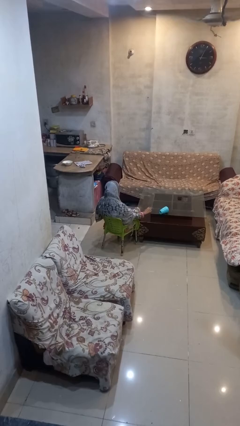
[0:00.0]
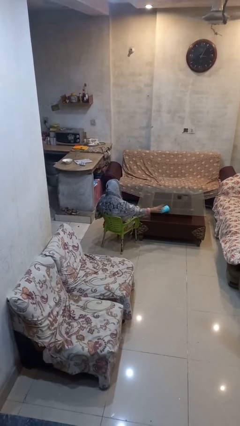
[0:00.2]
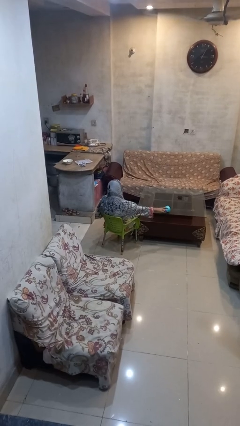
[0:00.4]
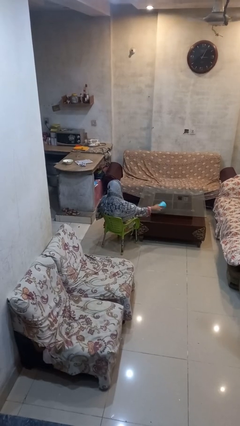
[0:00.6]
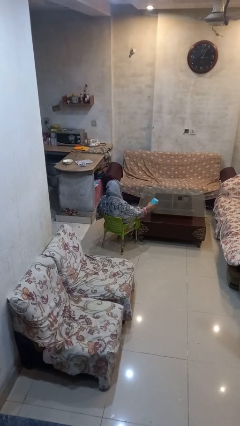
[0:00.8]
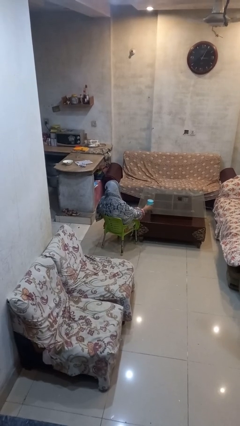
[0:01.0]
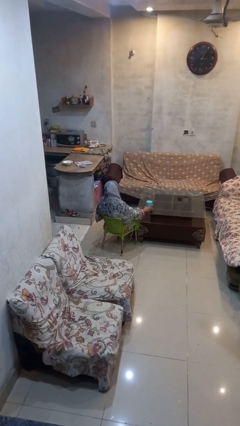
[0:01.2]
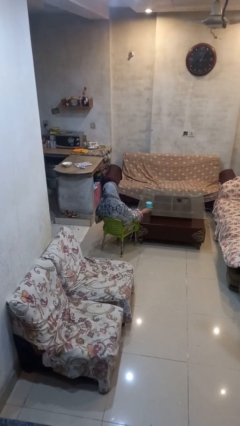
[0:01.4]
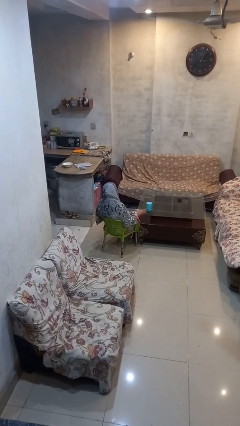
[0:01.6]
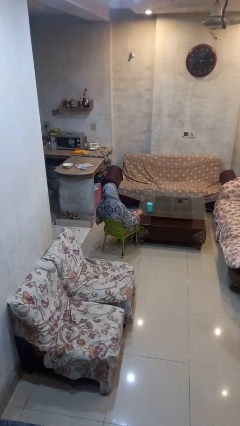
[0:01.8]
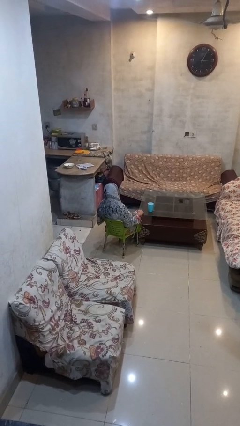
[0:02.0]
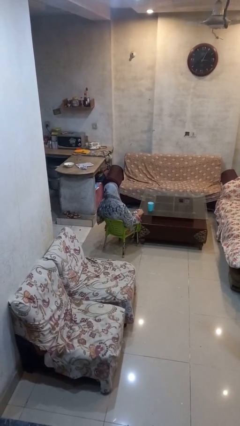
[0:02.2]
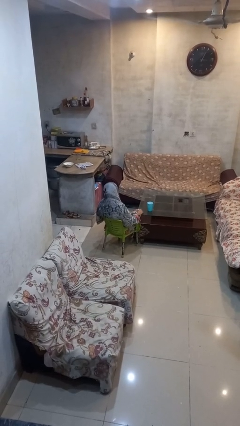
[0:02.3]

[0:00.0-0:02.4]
person sets upright glass

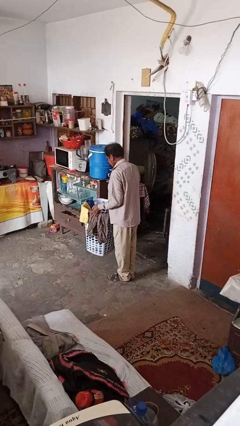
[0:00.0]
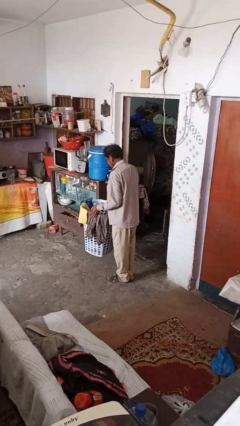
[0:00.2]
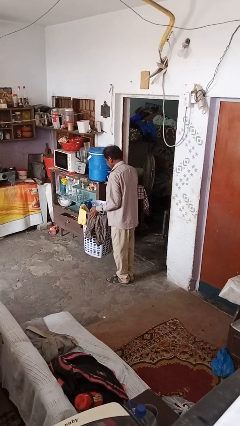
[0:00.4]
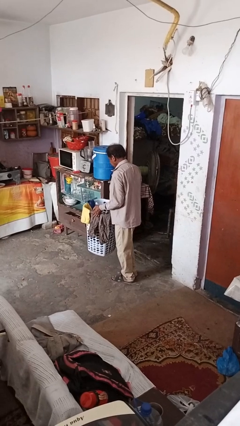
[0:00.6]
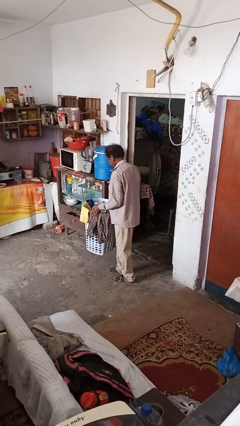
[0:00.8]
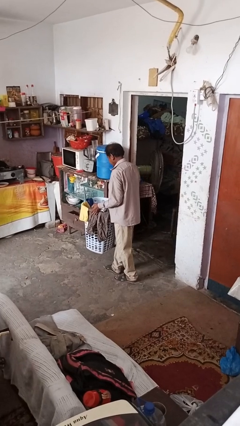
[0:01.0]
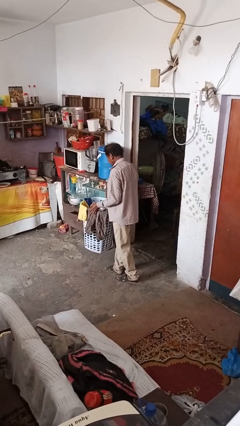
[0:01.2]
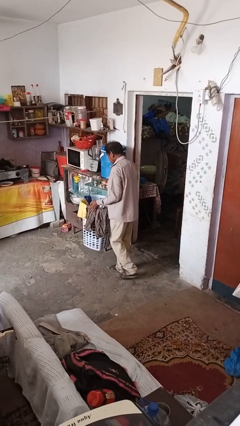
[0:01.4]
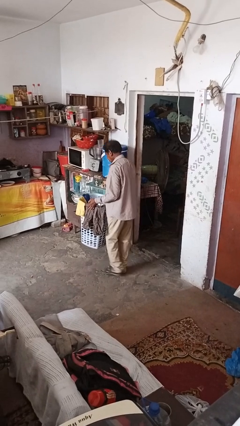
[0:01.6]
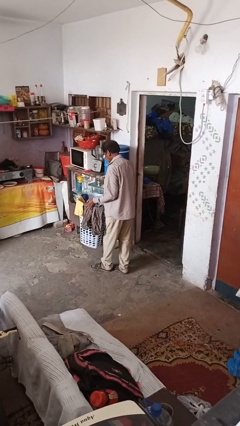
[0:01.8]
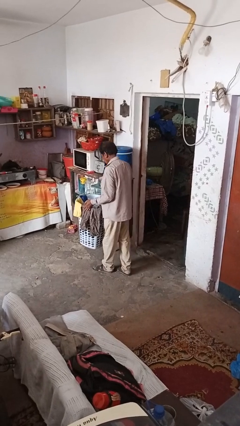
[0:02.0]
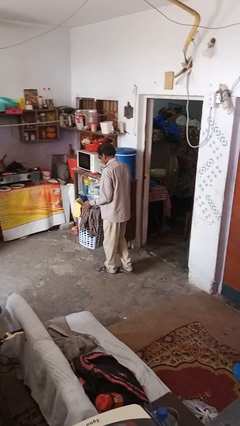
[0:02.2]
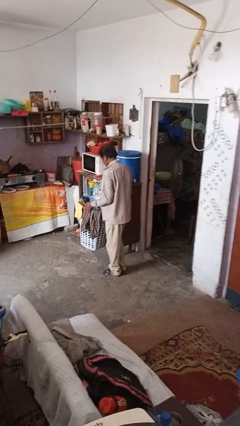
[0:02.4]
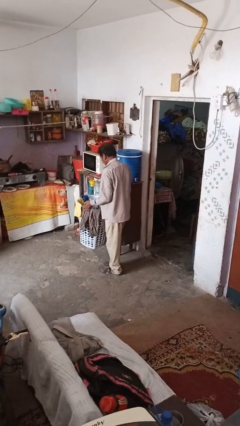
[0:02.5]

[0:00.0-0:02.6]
person carries laundry basket

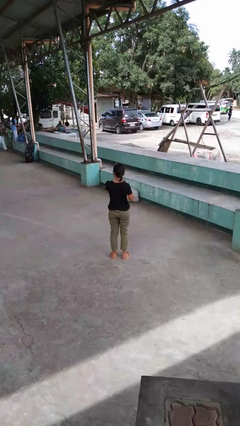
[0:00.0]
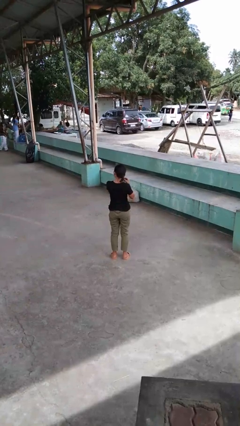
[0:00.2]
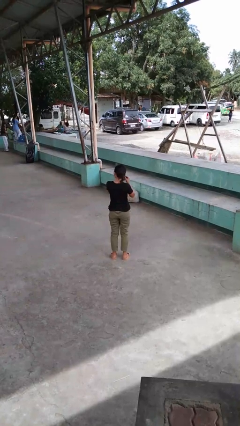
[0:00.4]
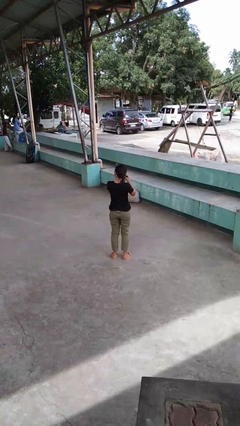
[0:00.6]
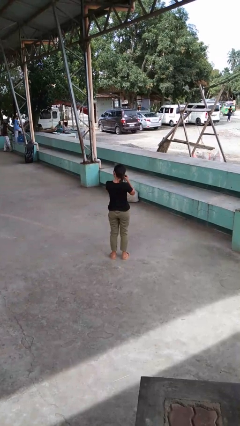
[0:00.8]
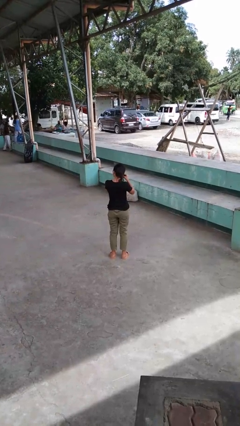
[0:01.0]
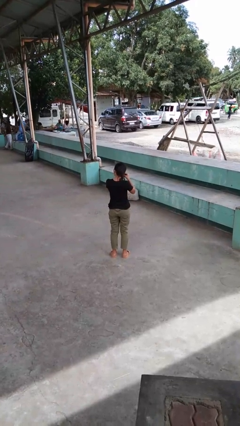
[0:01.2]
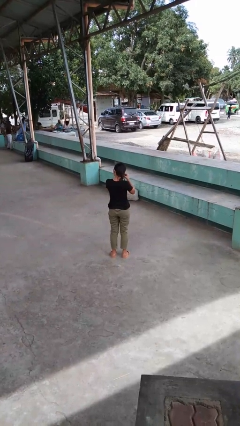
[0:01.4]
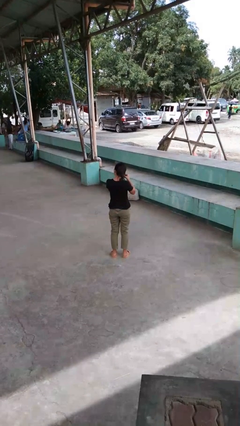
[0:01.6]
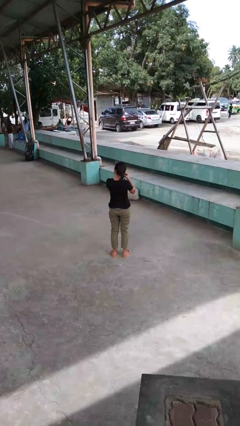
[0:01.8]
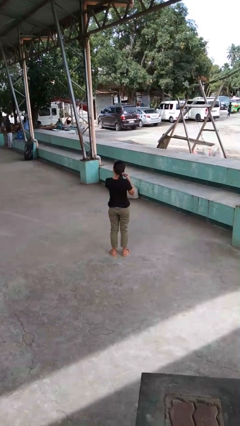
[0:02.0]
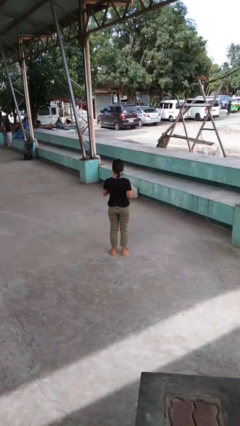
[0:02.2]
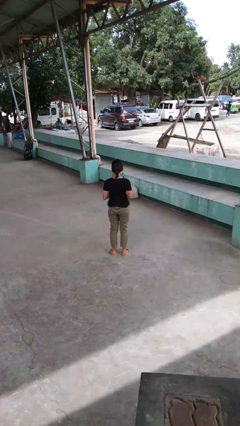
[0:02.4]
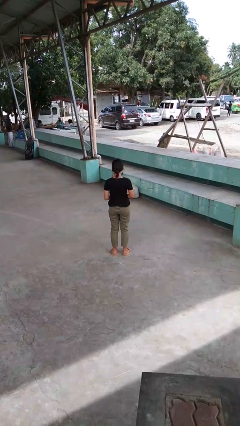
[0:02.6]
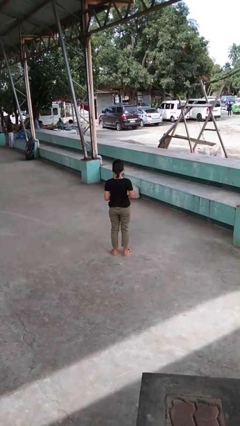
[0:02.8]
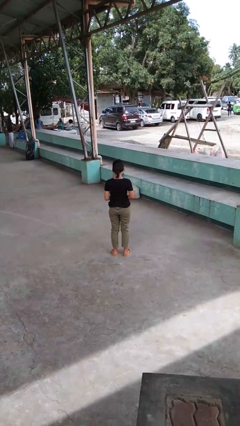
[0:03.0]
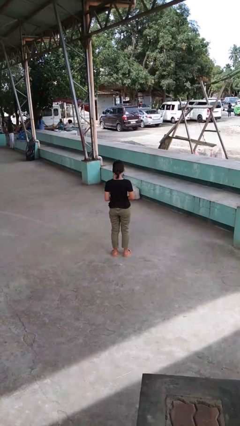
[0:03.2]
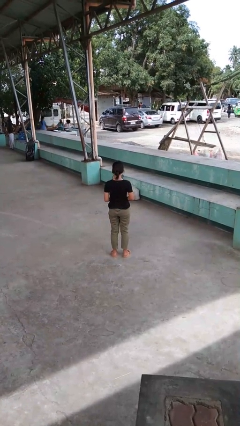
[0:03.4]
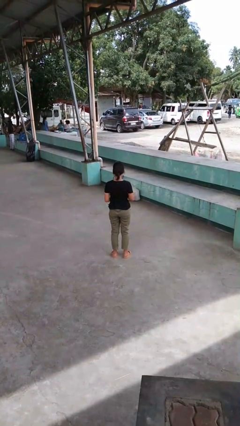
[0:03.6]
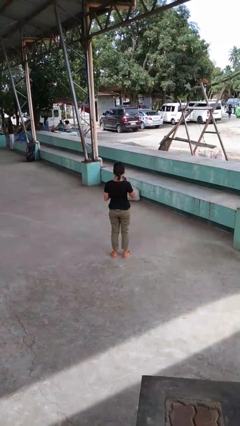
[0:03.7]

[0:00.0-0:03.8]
person puts on earrings

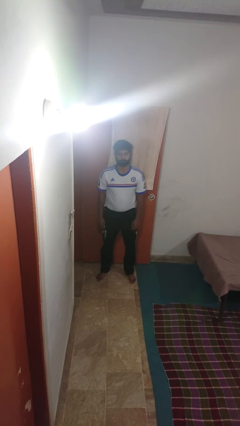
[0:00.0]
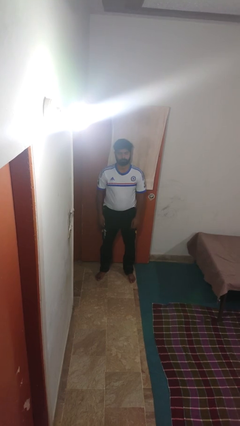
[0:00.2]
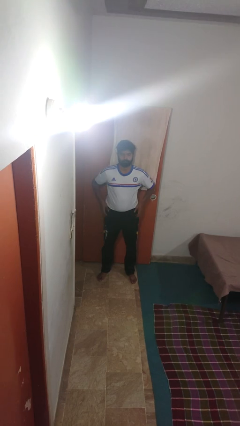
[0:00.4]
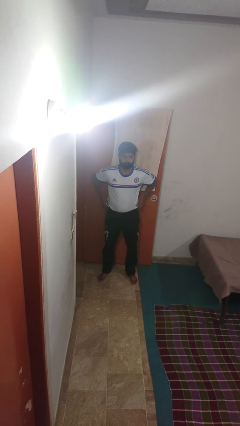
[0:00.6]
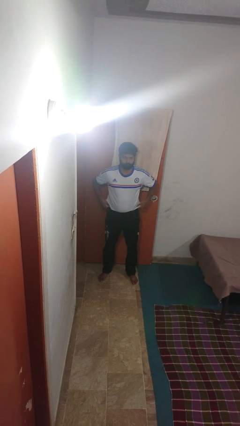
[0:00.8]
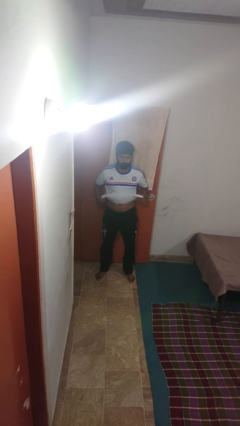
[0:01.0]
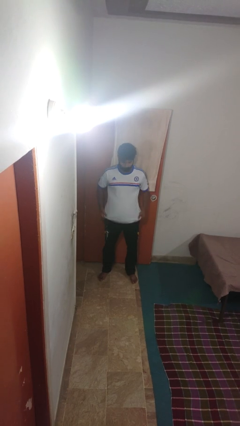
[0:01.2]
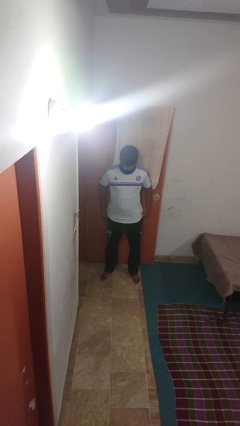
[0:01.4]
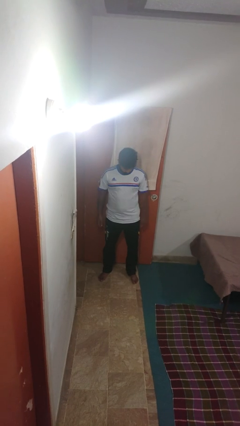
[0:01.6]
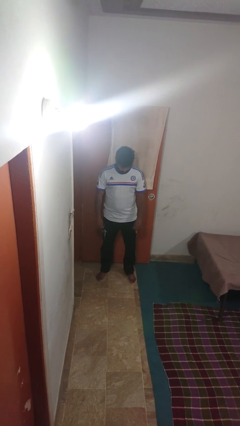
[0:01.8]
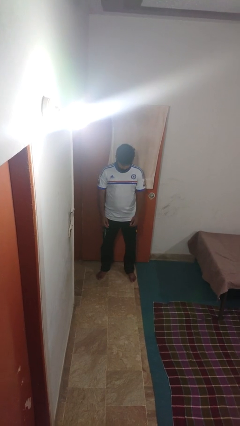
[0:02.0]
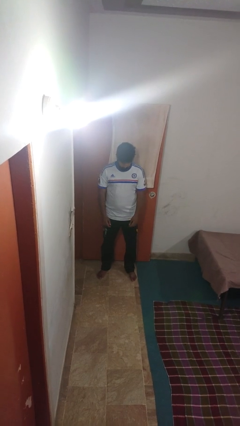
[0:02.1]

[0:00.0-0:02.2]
person untucks shirt

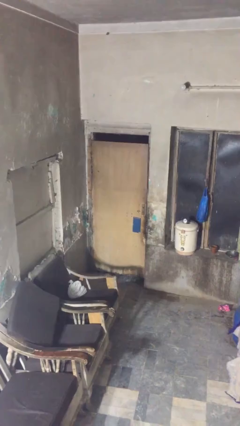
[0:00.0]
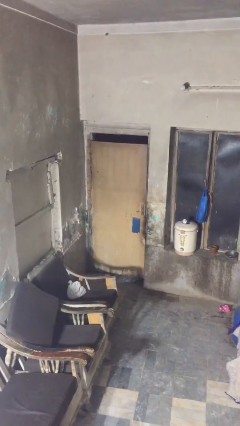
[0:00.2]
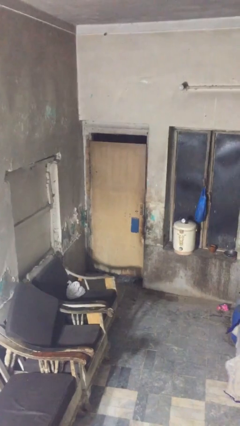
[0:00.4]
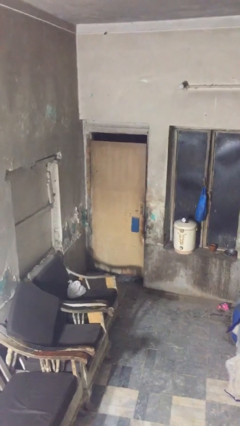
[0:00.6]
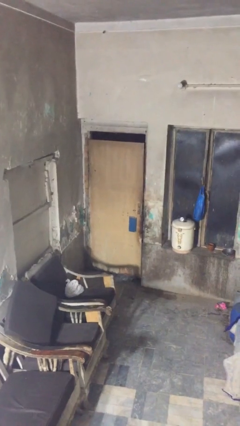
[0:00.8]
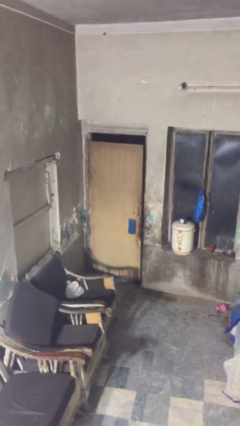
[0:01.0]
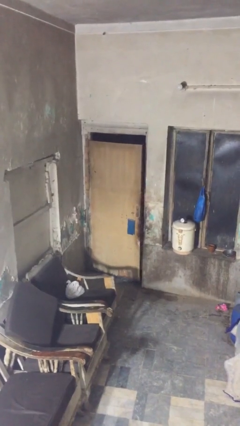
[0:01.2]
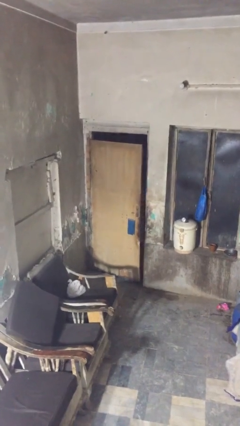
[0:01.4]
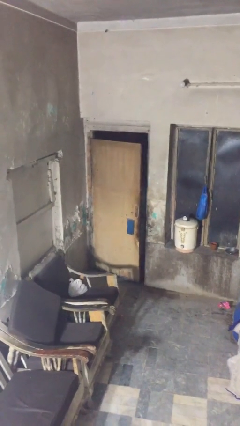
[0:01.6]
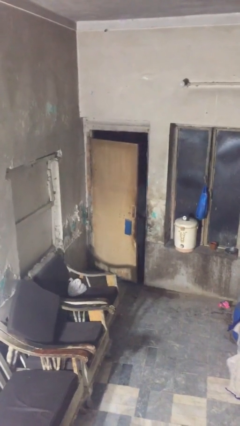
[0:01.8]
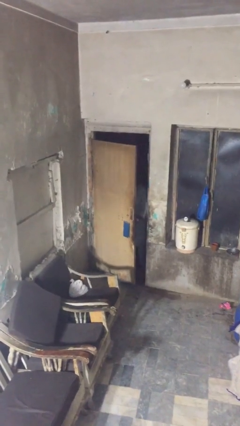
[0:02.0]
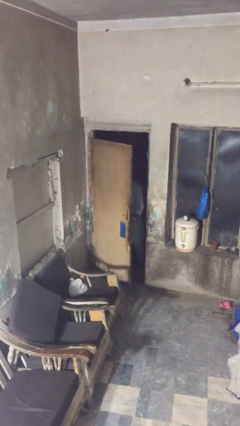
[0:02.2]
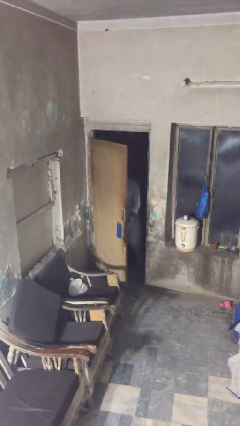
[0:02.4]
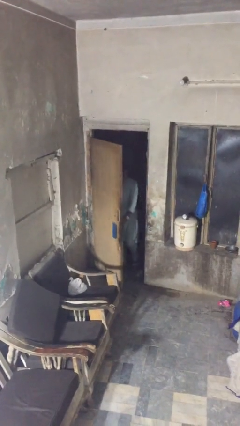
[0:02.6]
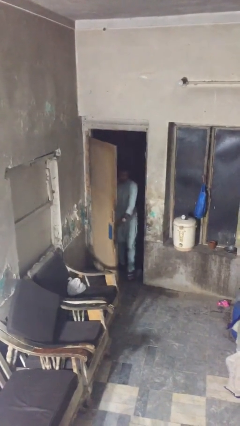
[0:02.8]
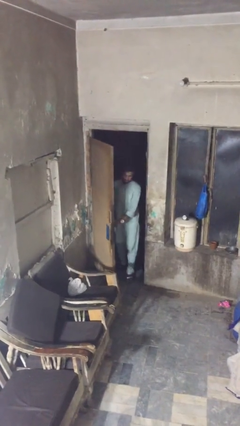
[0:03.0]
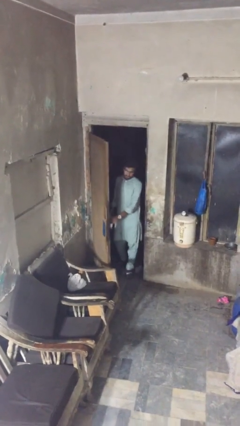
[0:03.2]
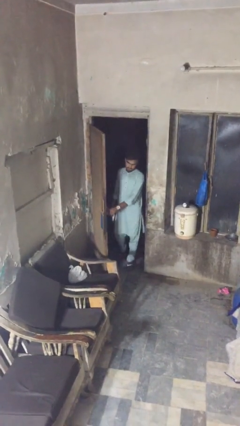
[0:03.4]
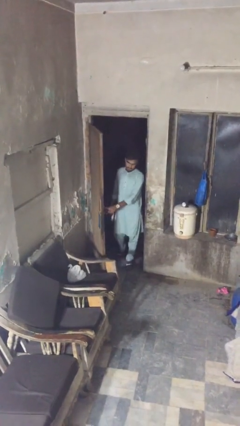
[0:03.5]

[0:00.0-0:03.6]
person opens facility door

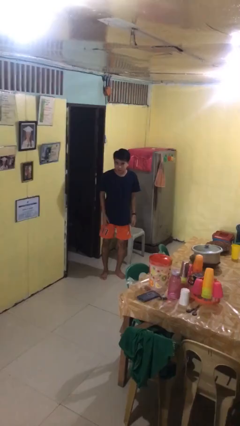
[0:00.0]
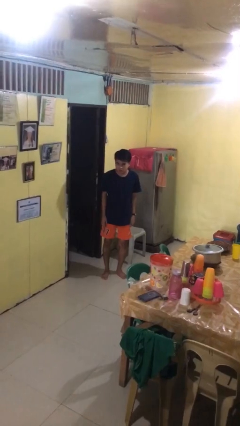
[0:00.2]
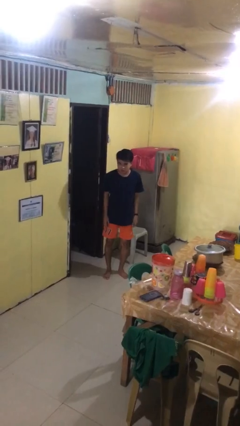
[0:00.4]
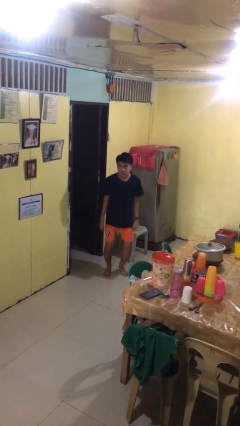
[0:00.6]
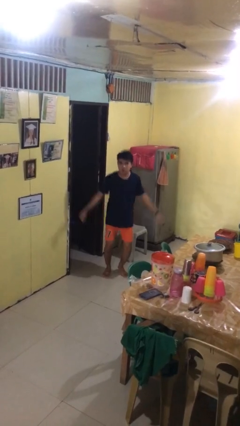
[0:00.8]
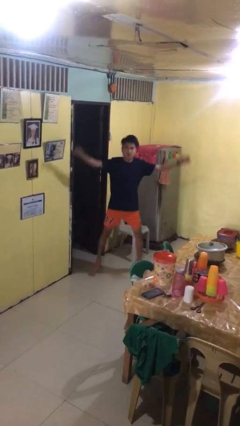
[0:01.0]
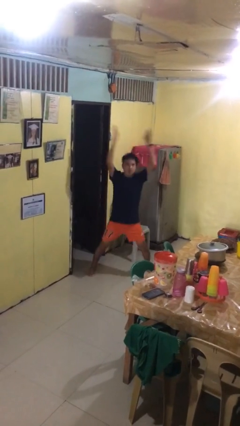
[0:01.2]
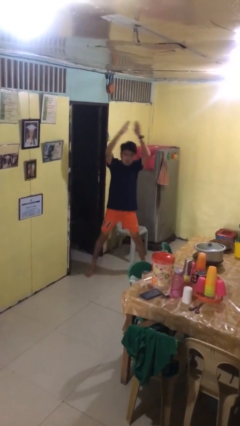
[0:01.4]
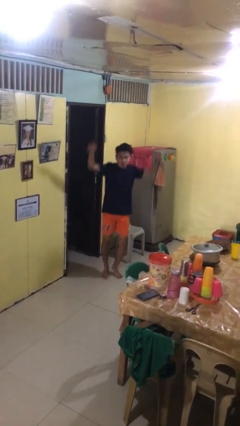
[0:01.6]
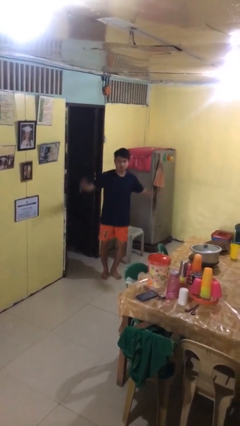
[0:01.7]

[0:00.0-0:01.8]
person exercises with jumping jacks

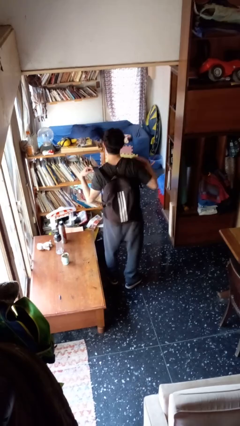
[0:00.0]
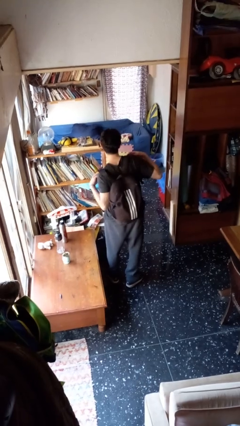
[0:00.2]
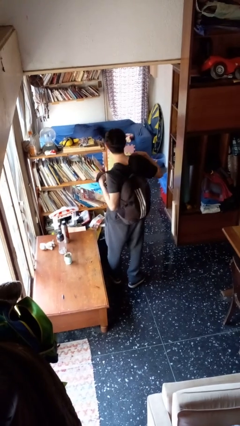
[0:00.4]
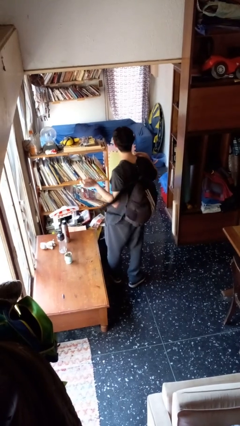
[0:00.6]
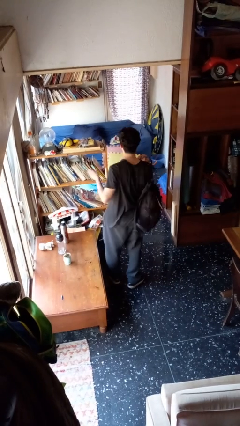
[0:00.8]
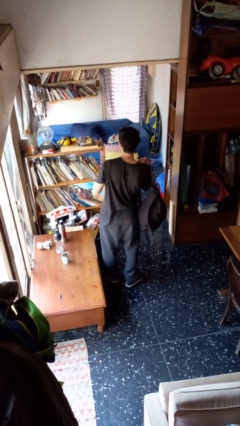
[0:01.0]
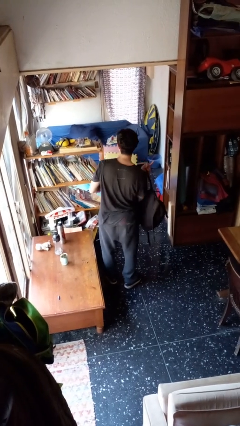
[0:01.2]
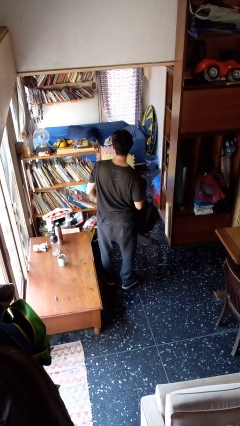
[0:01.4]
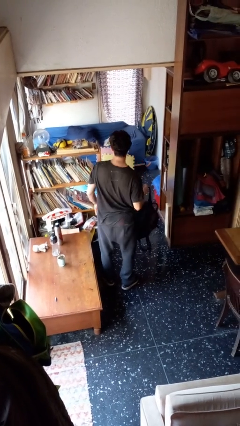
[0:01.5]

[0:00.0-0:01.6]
person takes off backpack
